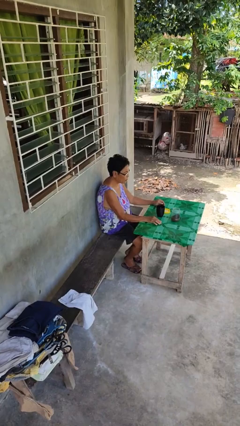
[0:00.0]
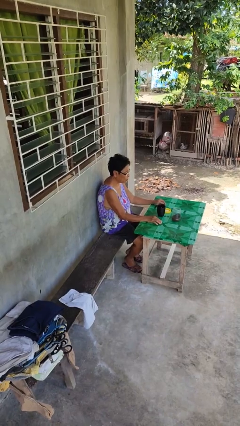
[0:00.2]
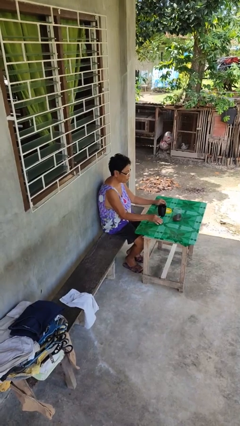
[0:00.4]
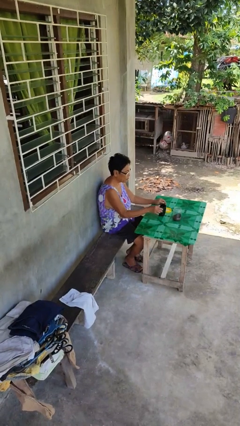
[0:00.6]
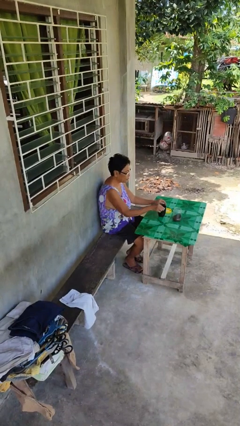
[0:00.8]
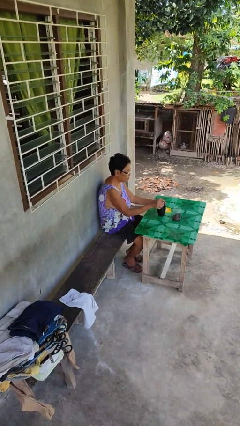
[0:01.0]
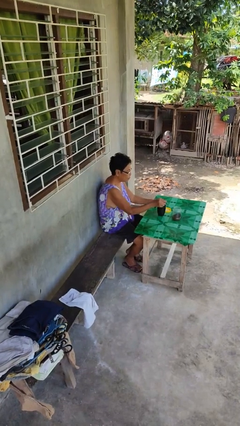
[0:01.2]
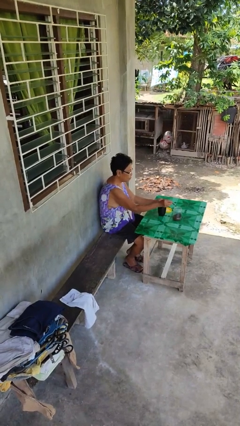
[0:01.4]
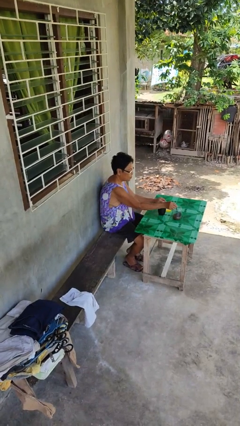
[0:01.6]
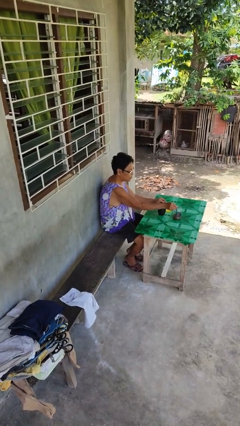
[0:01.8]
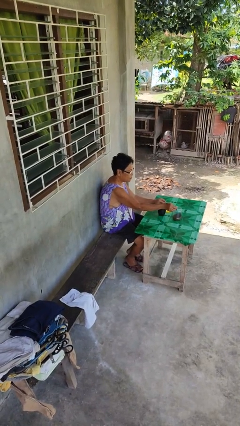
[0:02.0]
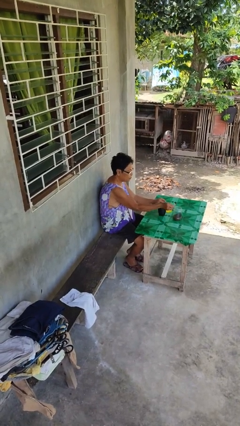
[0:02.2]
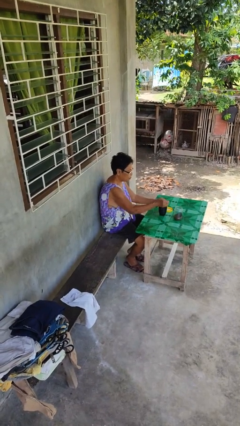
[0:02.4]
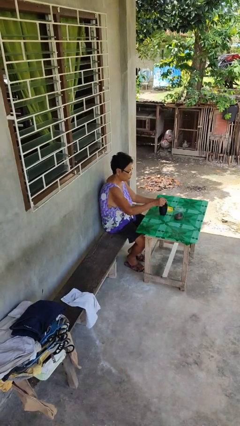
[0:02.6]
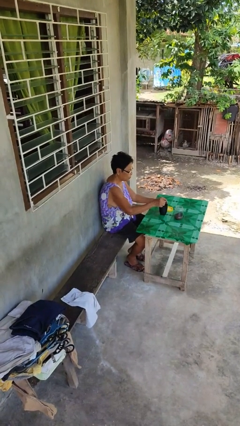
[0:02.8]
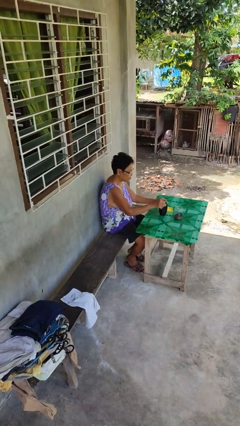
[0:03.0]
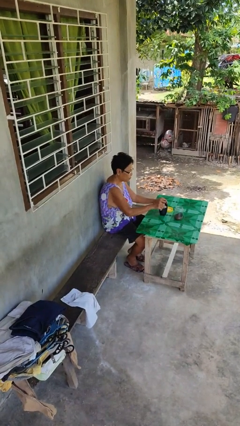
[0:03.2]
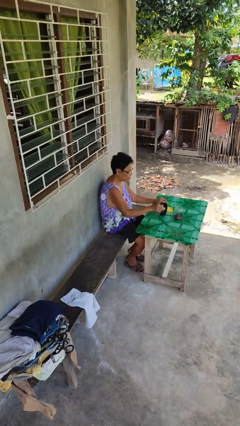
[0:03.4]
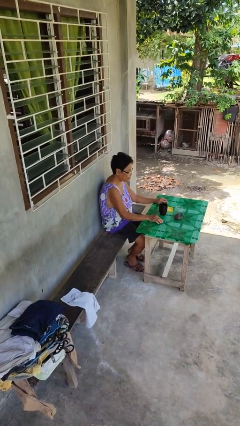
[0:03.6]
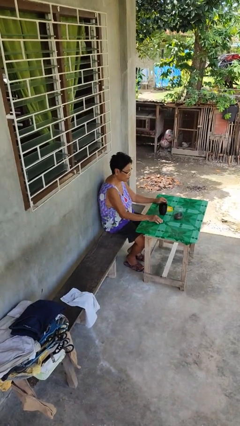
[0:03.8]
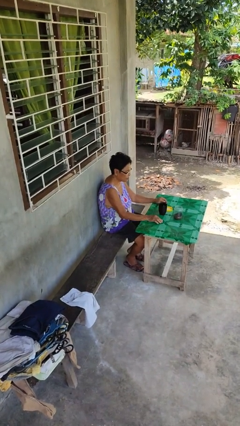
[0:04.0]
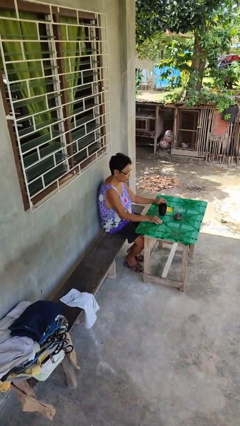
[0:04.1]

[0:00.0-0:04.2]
person pours coffee into mug

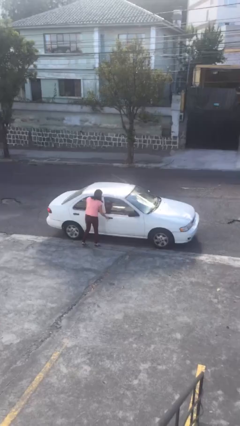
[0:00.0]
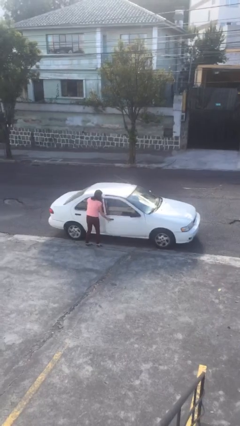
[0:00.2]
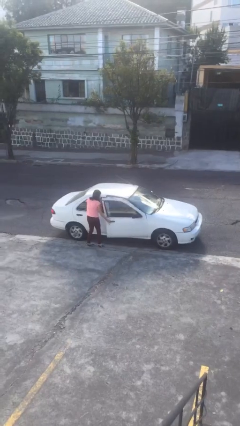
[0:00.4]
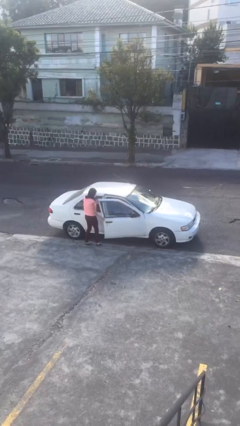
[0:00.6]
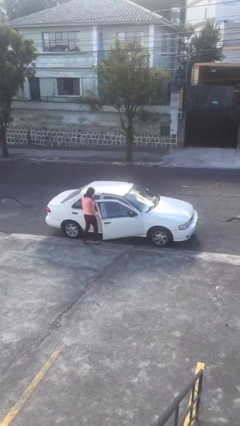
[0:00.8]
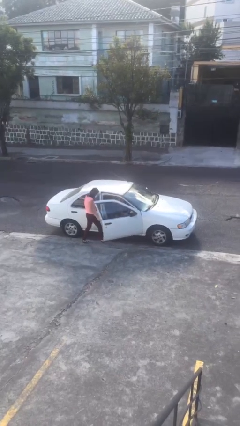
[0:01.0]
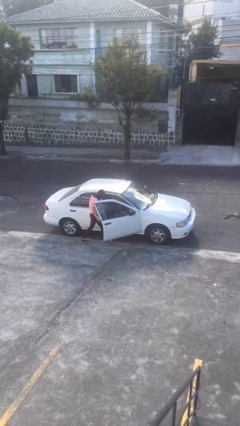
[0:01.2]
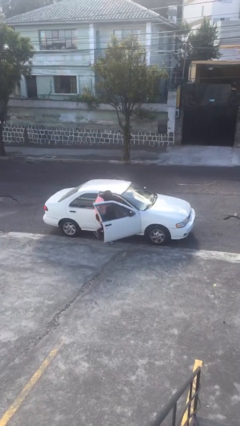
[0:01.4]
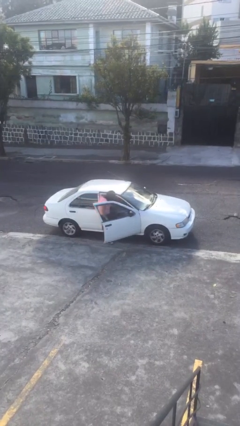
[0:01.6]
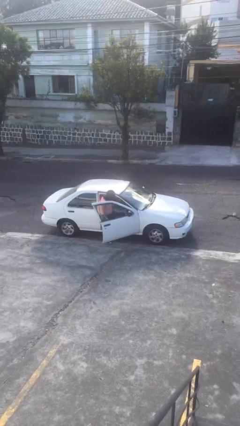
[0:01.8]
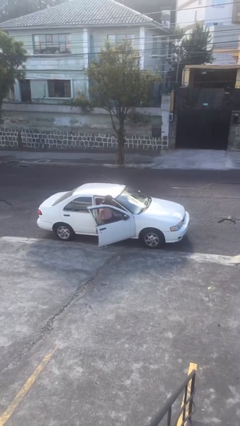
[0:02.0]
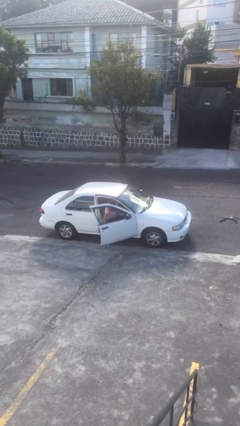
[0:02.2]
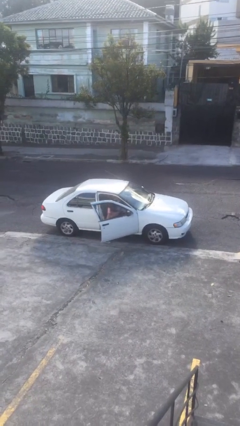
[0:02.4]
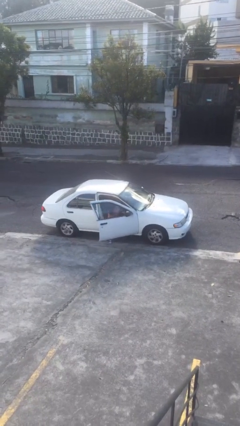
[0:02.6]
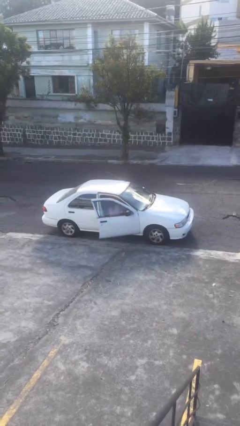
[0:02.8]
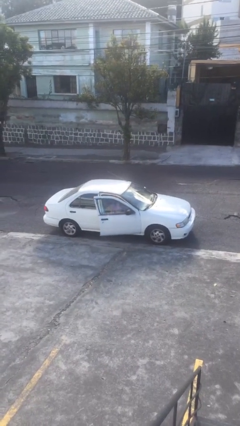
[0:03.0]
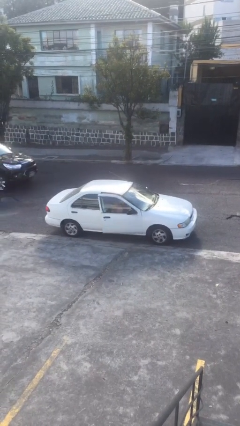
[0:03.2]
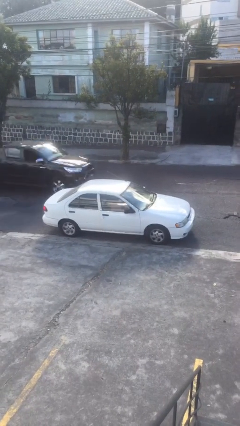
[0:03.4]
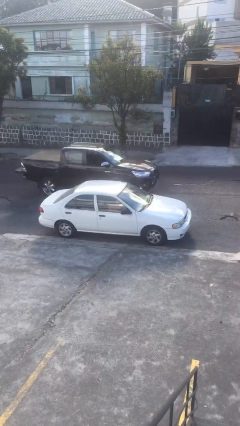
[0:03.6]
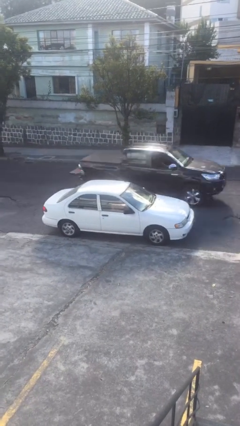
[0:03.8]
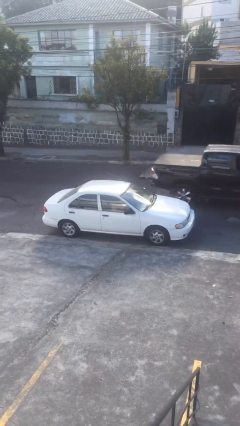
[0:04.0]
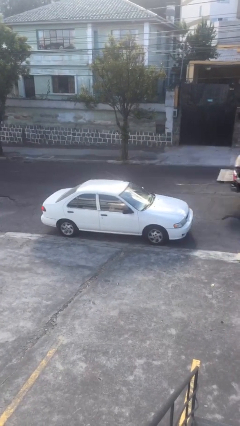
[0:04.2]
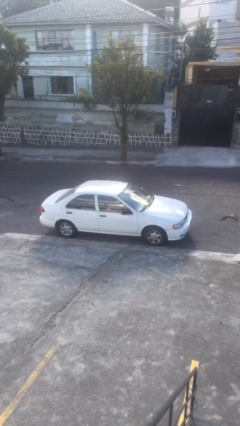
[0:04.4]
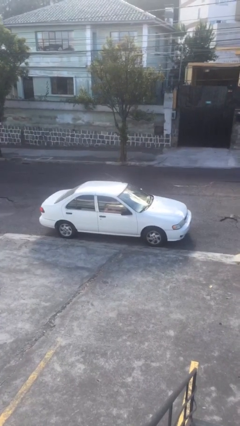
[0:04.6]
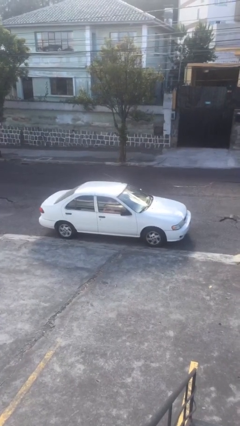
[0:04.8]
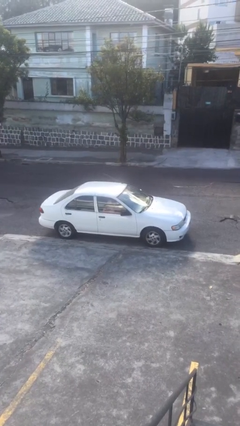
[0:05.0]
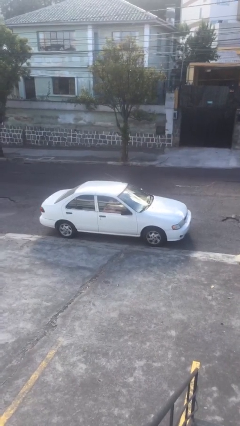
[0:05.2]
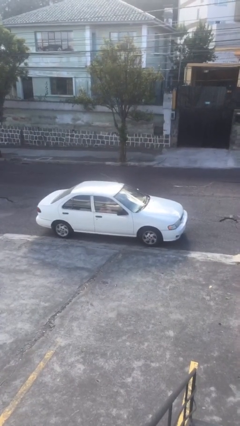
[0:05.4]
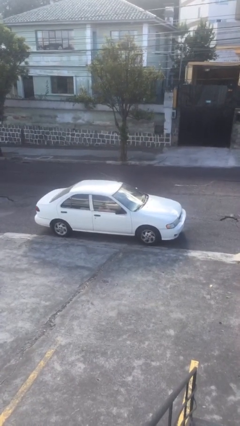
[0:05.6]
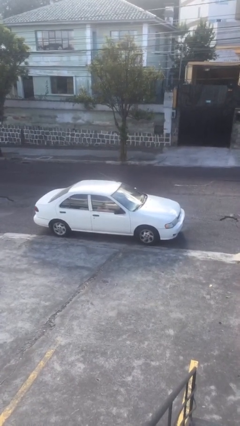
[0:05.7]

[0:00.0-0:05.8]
car picks up person

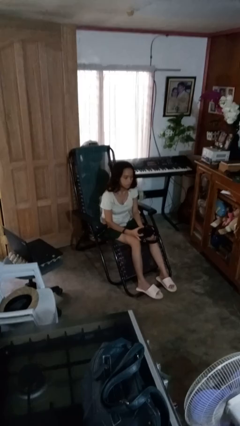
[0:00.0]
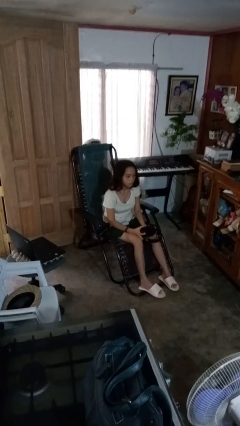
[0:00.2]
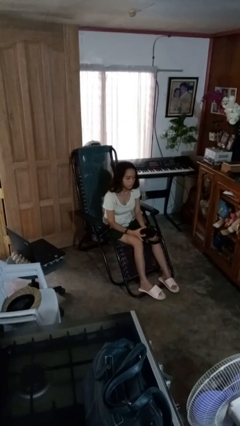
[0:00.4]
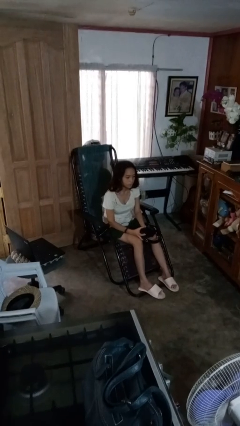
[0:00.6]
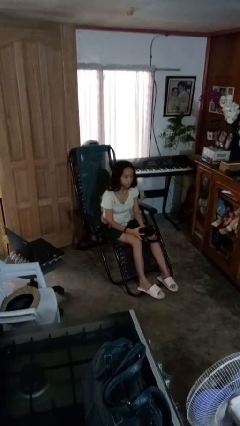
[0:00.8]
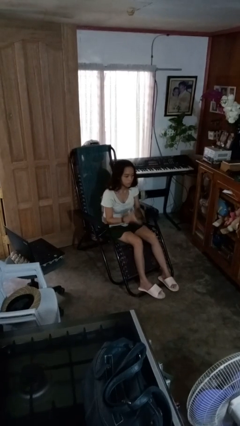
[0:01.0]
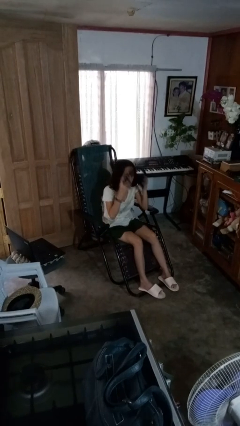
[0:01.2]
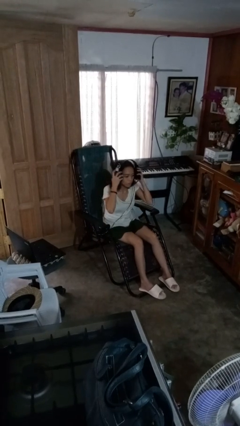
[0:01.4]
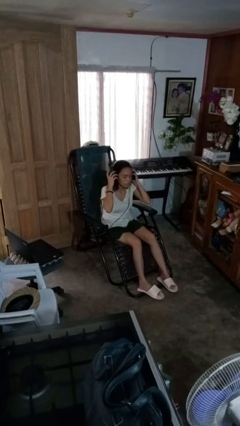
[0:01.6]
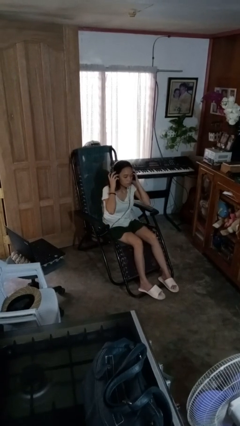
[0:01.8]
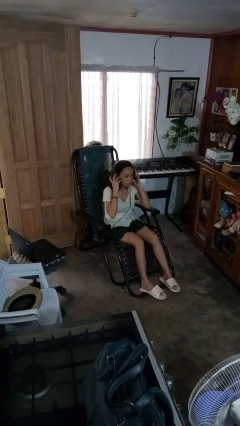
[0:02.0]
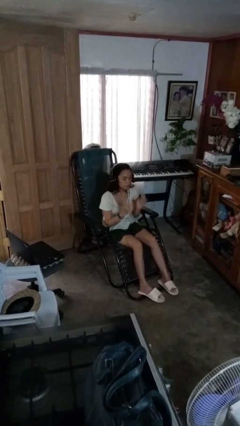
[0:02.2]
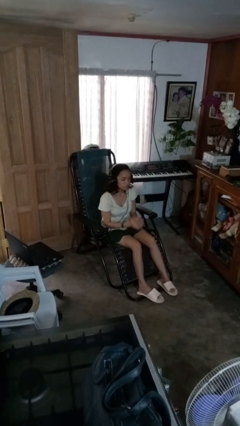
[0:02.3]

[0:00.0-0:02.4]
person puts on headphones

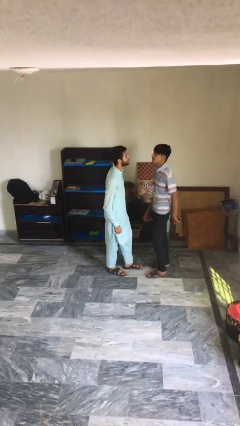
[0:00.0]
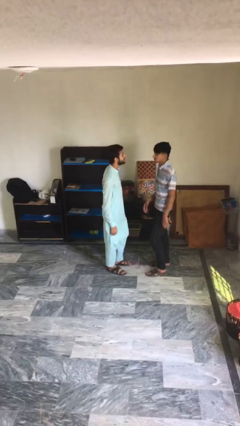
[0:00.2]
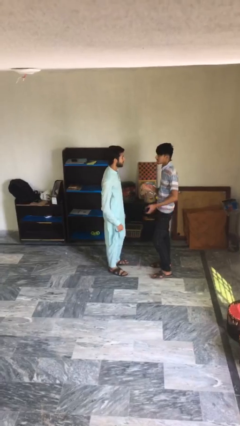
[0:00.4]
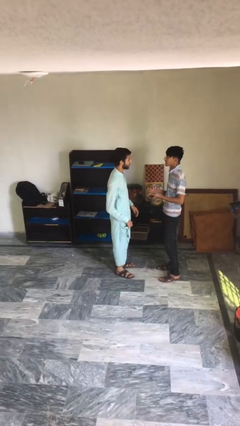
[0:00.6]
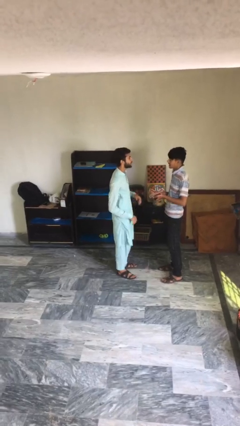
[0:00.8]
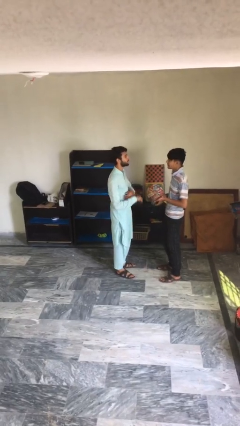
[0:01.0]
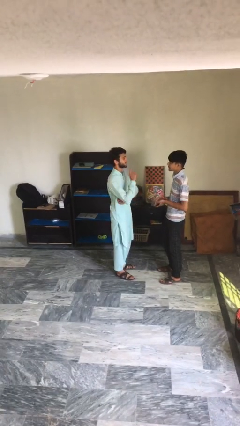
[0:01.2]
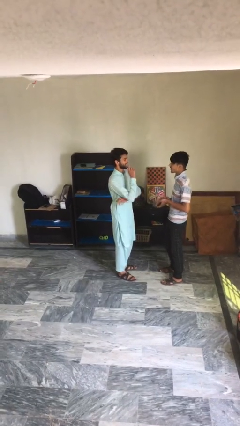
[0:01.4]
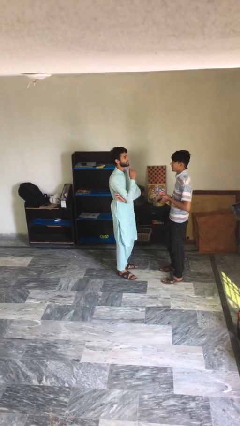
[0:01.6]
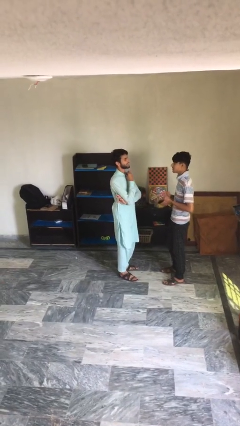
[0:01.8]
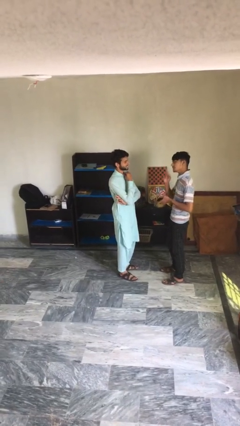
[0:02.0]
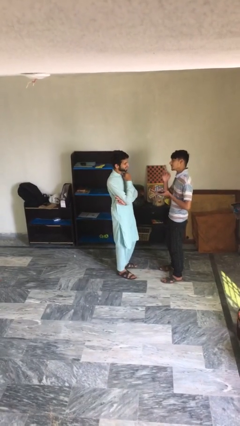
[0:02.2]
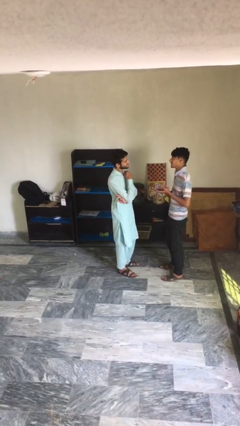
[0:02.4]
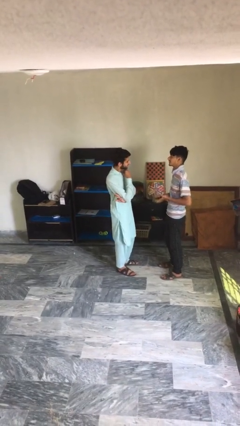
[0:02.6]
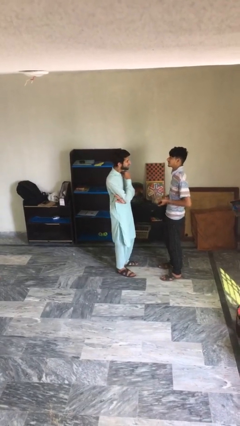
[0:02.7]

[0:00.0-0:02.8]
person talks to person

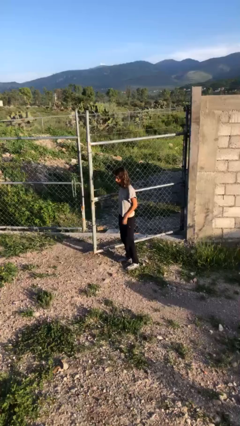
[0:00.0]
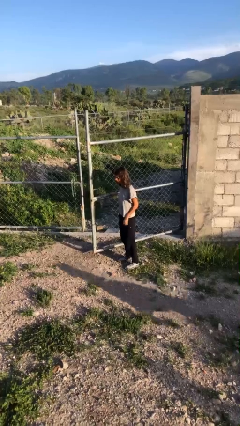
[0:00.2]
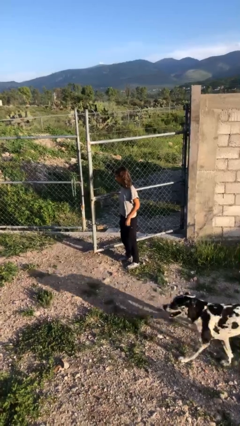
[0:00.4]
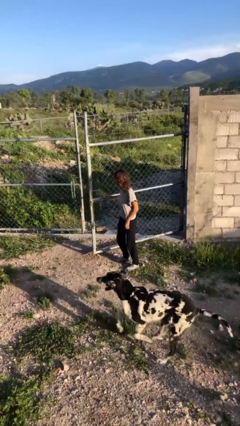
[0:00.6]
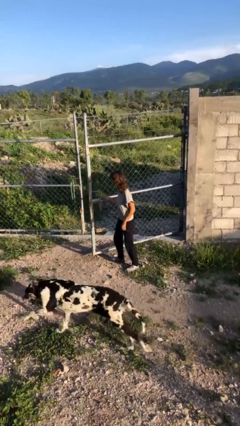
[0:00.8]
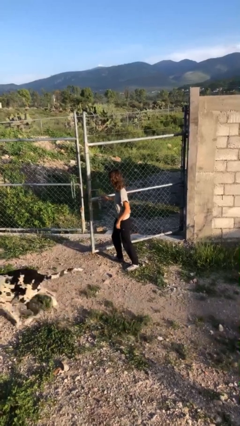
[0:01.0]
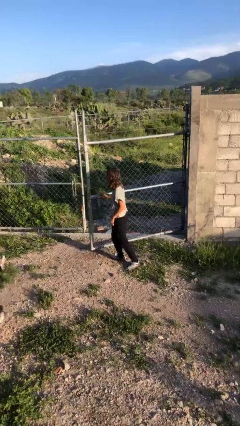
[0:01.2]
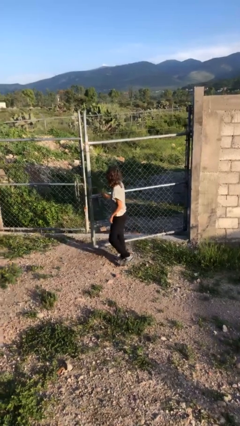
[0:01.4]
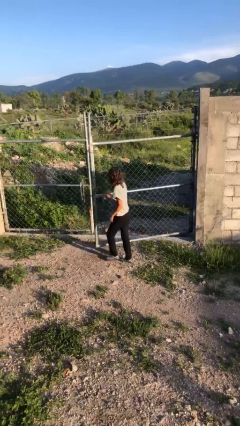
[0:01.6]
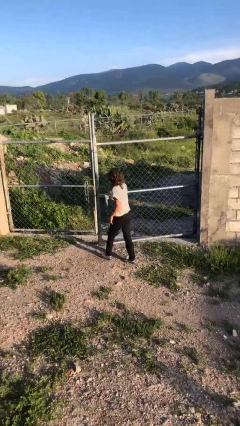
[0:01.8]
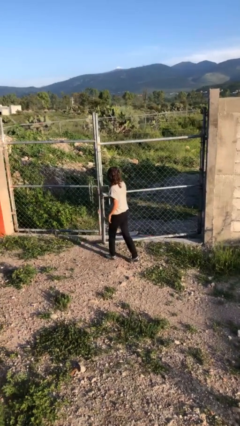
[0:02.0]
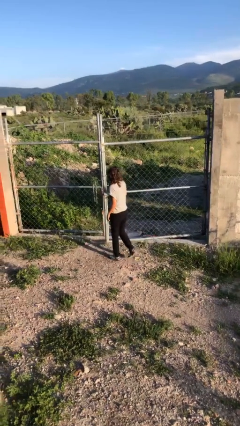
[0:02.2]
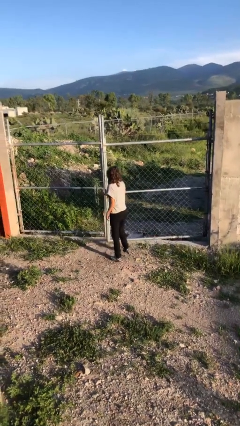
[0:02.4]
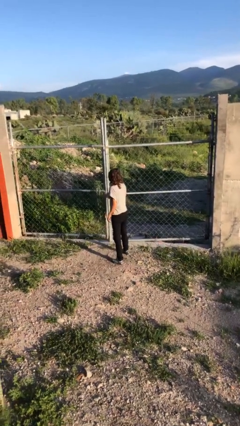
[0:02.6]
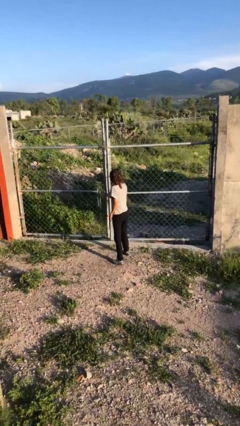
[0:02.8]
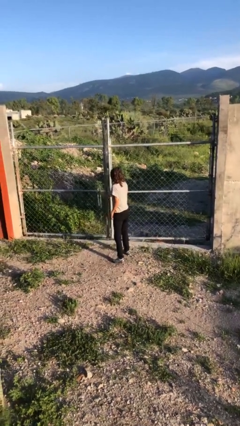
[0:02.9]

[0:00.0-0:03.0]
person closes gate
